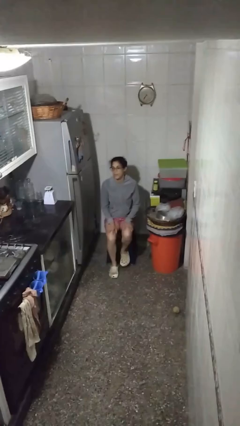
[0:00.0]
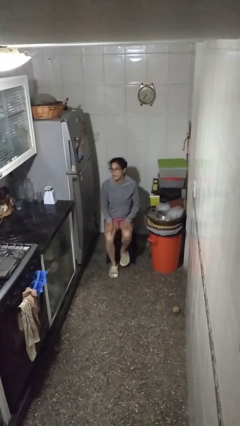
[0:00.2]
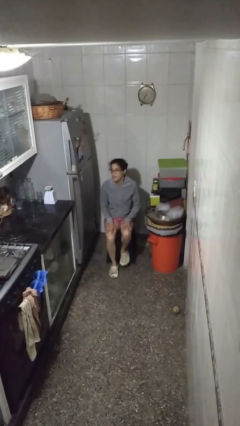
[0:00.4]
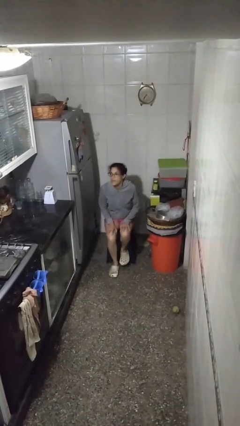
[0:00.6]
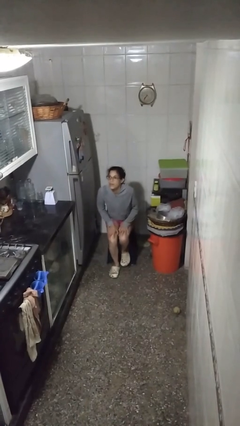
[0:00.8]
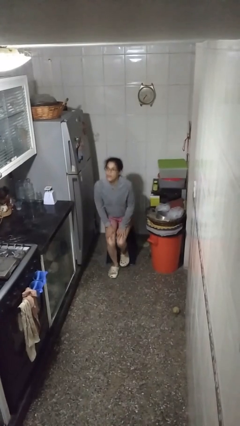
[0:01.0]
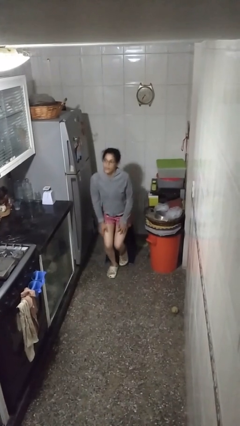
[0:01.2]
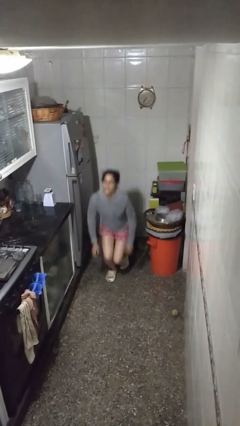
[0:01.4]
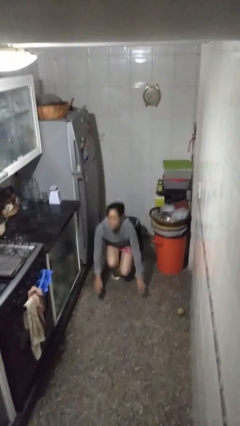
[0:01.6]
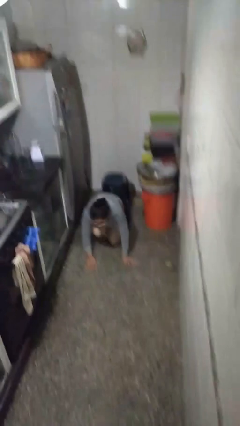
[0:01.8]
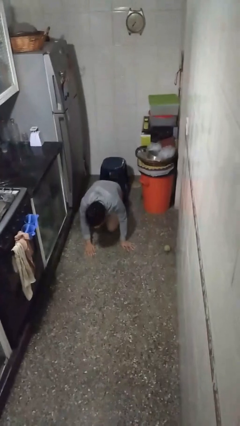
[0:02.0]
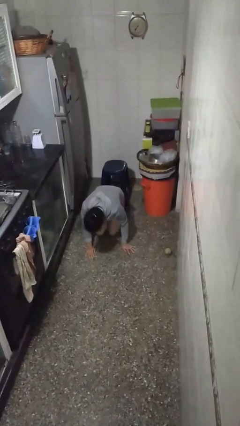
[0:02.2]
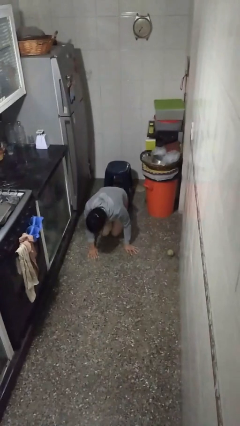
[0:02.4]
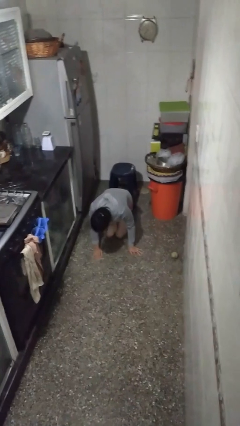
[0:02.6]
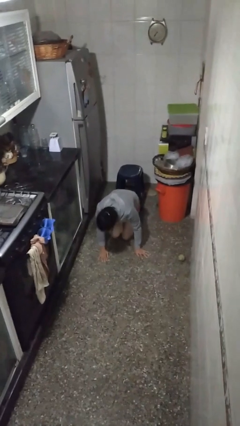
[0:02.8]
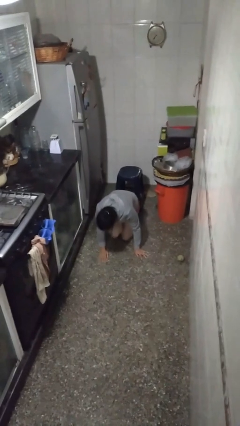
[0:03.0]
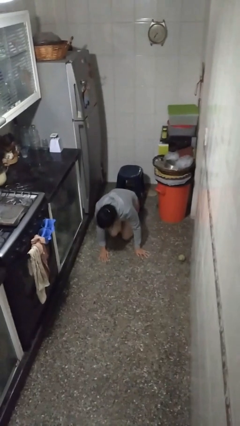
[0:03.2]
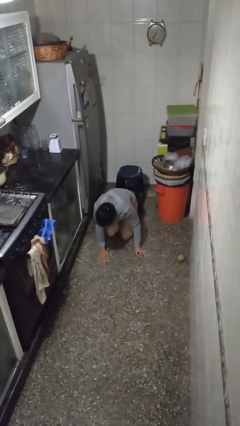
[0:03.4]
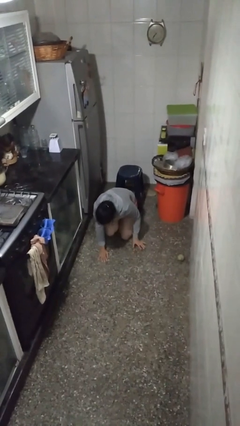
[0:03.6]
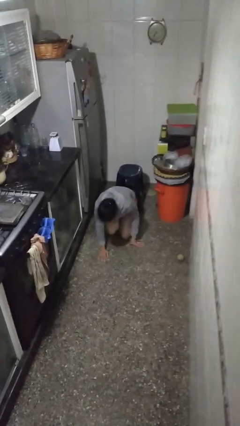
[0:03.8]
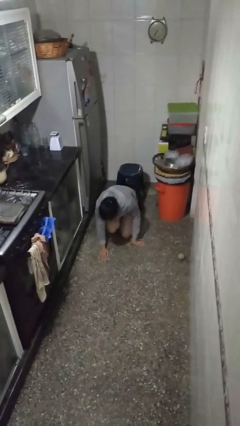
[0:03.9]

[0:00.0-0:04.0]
person falls from chair

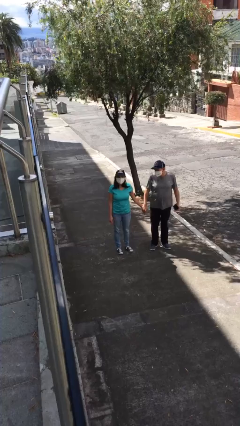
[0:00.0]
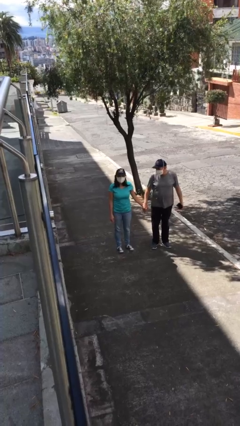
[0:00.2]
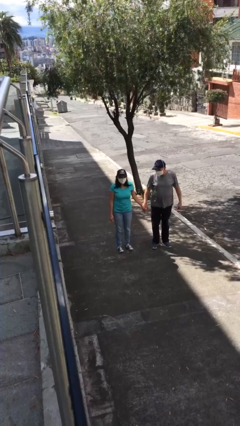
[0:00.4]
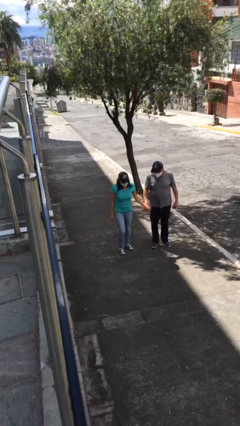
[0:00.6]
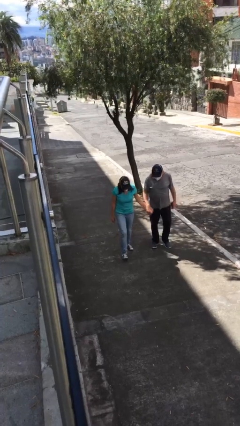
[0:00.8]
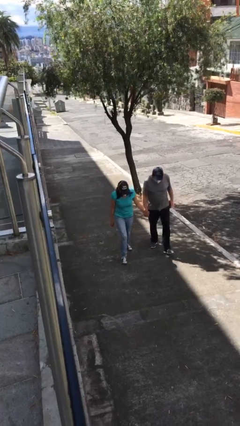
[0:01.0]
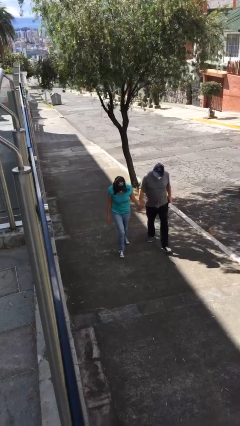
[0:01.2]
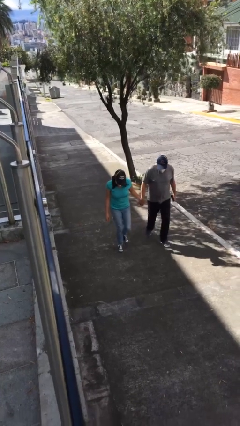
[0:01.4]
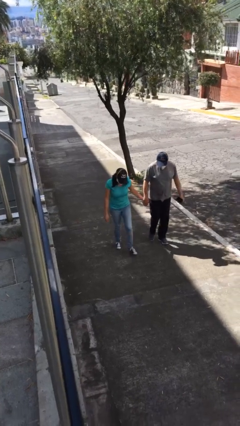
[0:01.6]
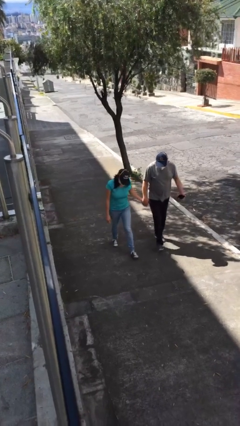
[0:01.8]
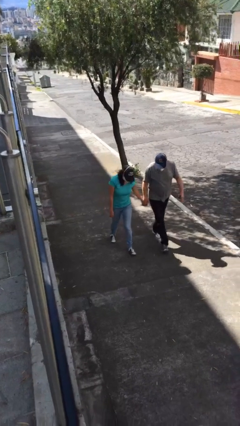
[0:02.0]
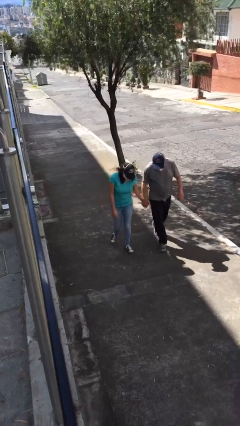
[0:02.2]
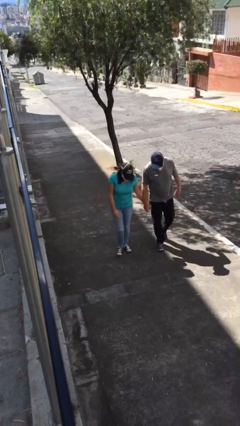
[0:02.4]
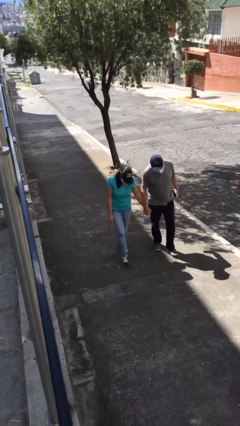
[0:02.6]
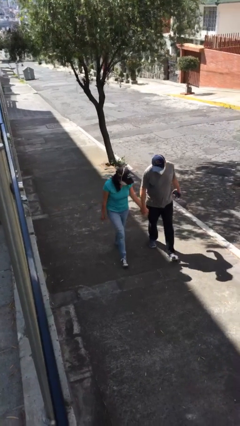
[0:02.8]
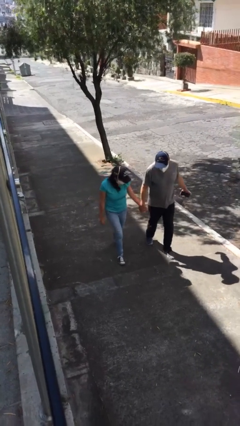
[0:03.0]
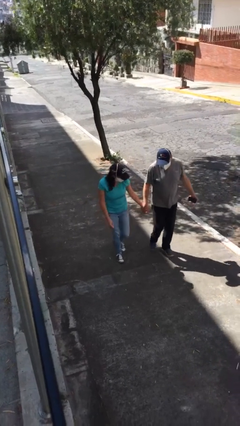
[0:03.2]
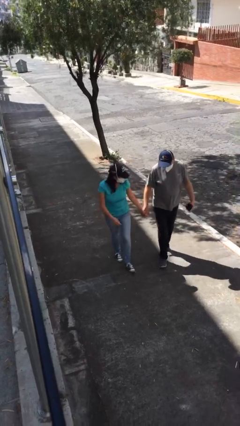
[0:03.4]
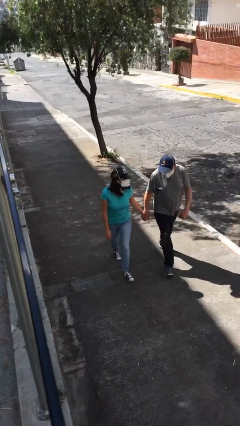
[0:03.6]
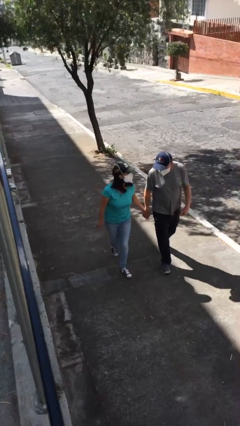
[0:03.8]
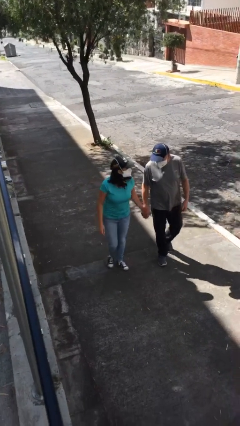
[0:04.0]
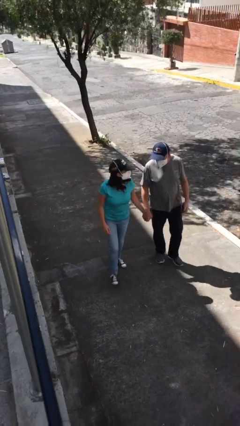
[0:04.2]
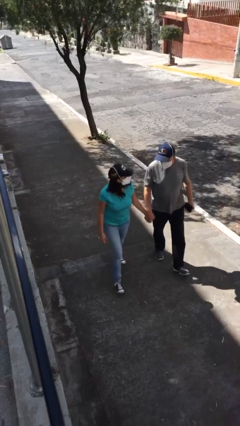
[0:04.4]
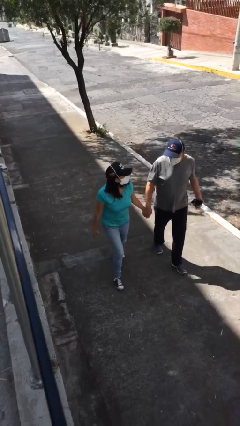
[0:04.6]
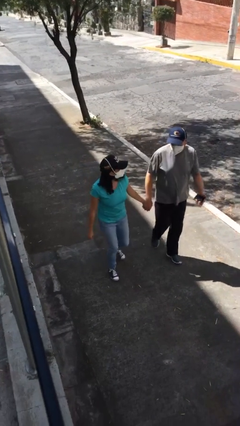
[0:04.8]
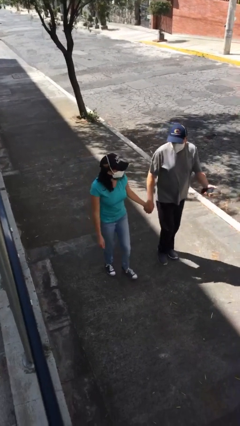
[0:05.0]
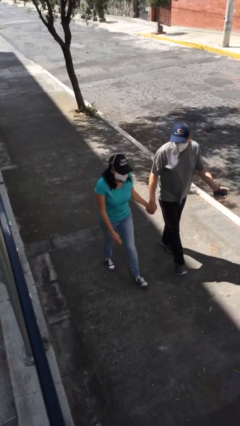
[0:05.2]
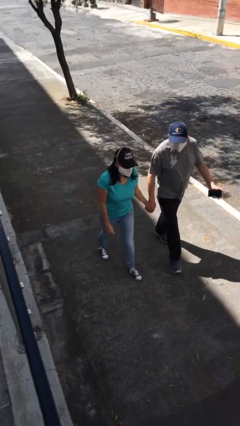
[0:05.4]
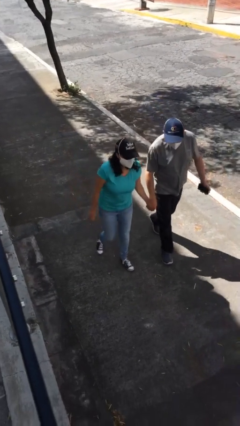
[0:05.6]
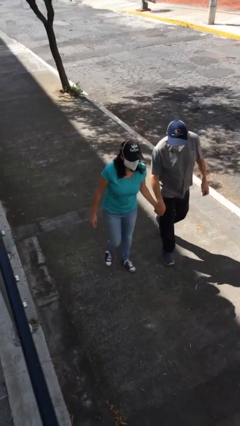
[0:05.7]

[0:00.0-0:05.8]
person holds hand

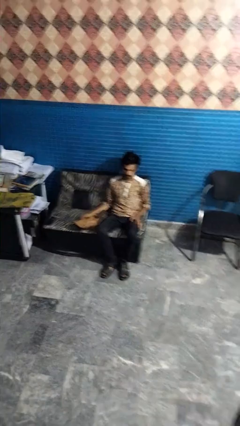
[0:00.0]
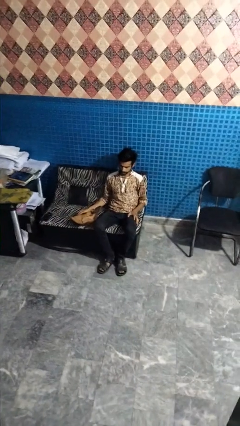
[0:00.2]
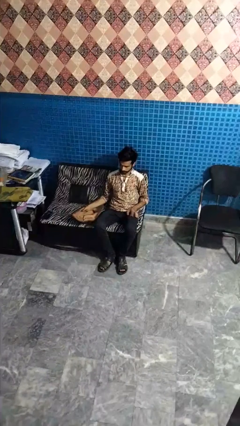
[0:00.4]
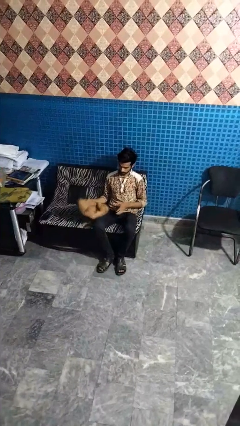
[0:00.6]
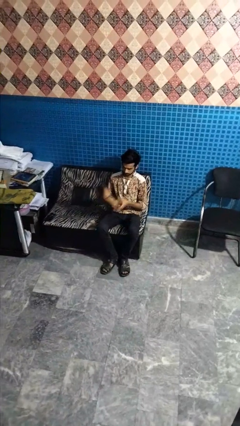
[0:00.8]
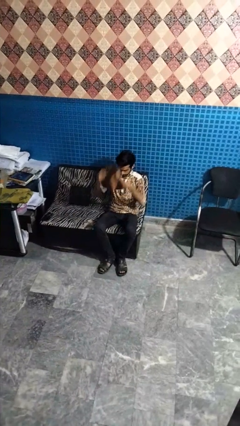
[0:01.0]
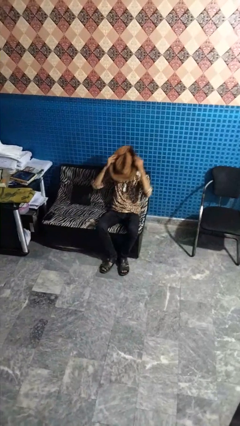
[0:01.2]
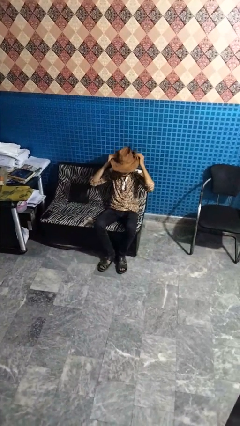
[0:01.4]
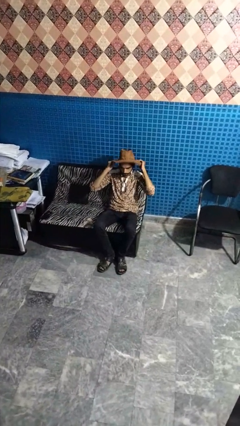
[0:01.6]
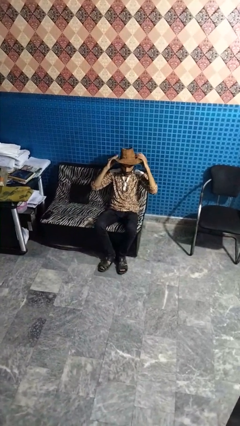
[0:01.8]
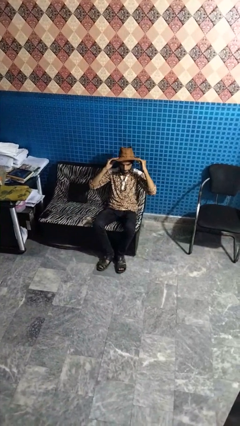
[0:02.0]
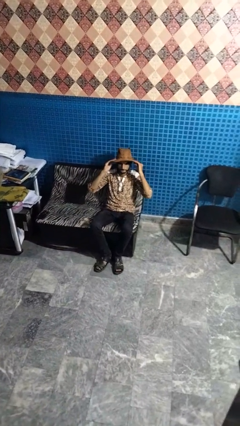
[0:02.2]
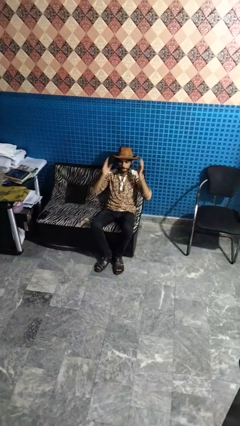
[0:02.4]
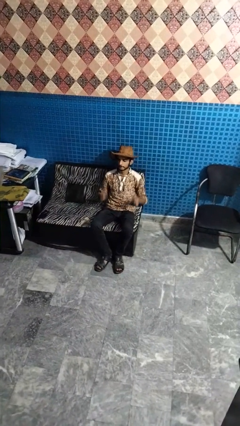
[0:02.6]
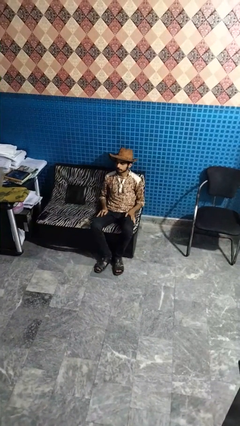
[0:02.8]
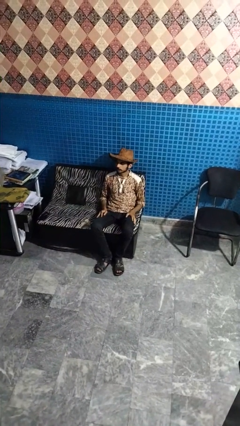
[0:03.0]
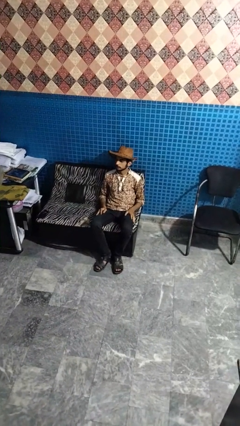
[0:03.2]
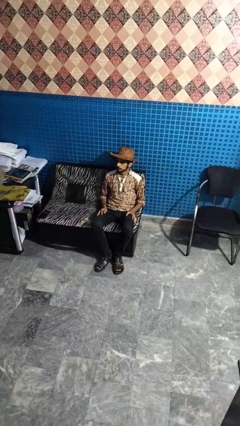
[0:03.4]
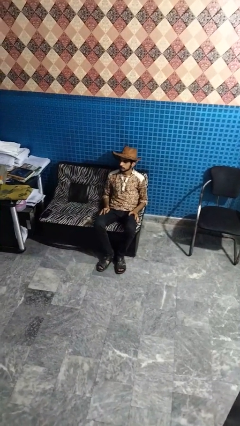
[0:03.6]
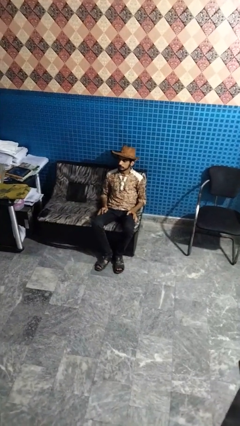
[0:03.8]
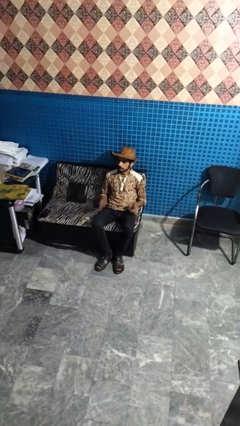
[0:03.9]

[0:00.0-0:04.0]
person puts on hat

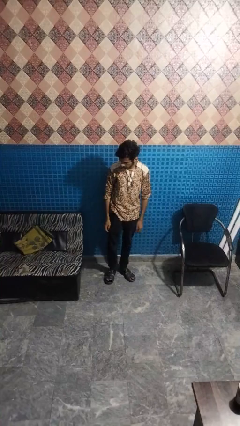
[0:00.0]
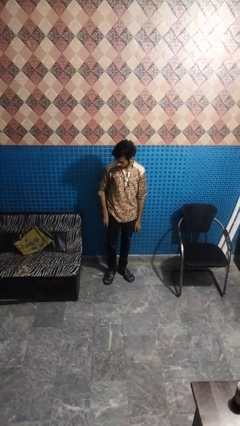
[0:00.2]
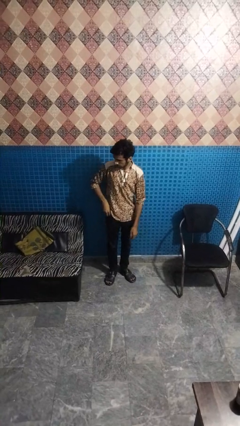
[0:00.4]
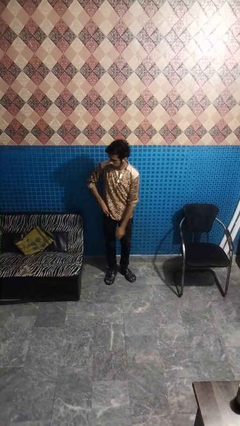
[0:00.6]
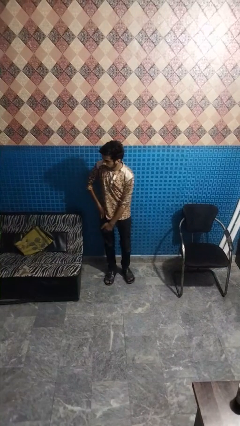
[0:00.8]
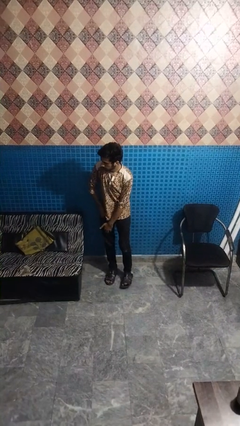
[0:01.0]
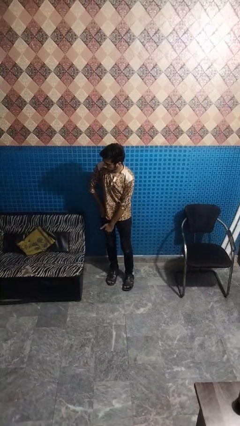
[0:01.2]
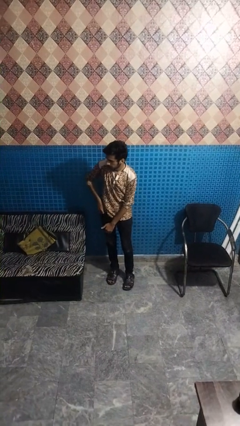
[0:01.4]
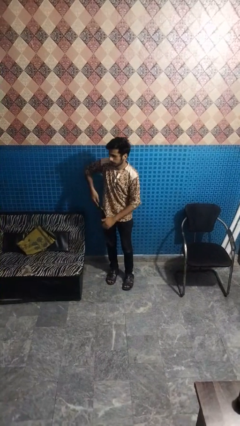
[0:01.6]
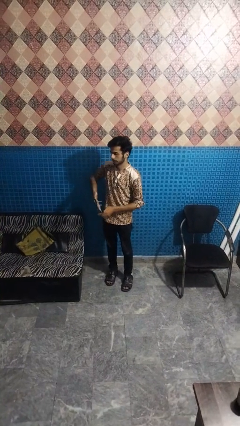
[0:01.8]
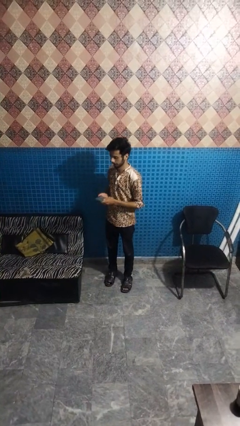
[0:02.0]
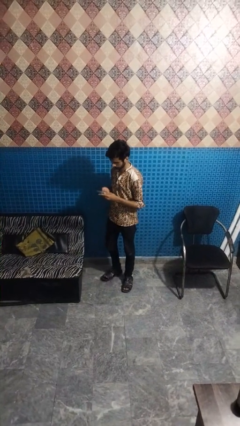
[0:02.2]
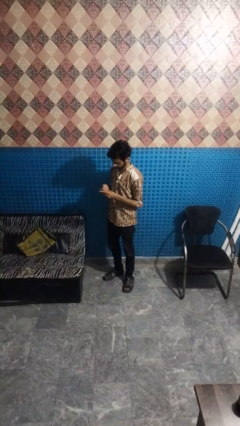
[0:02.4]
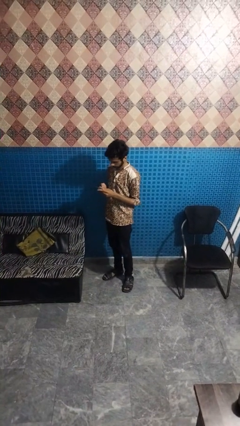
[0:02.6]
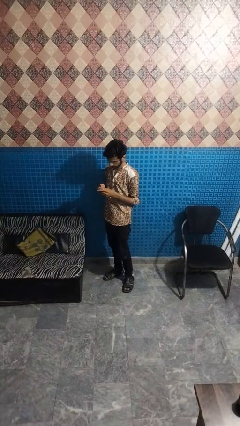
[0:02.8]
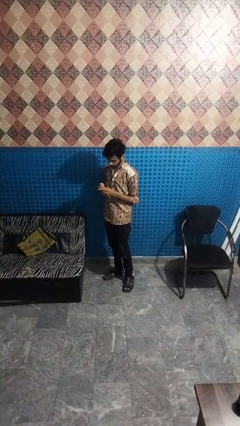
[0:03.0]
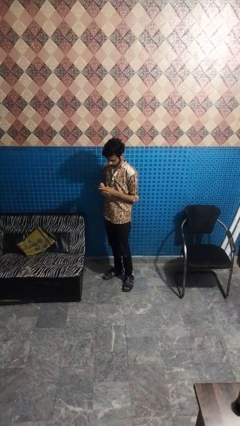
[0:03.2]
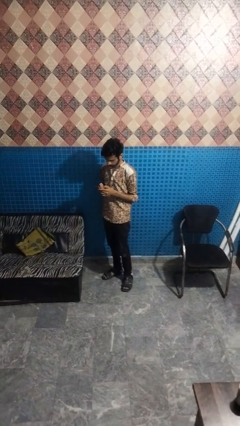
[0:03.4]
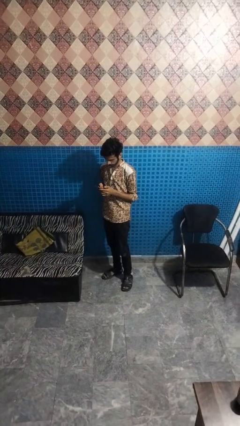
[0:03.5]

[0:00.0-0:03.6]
person takes phone from pocket

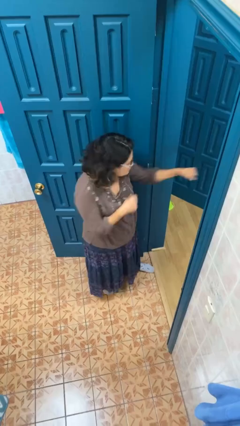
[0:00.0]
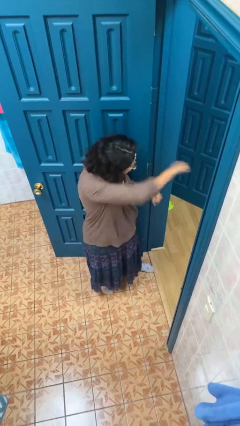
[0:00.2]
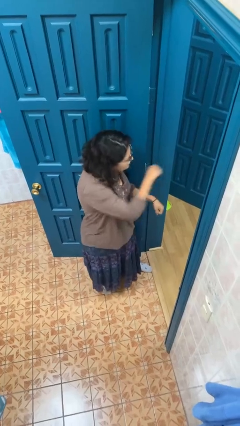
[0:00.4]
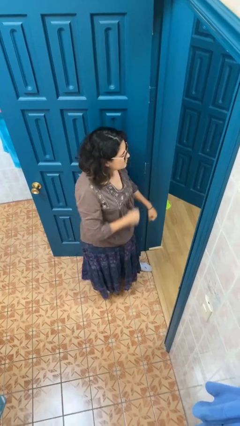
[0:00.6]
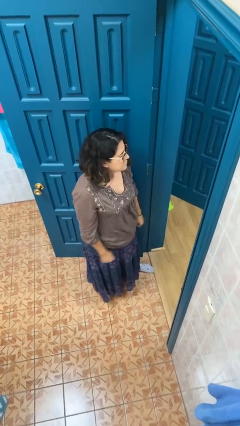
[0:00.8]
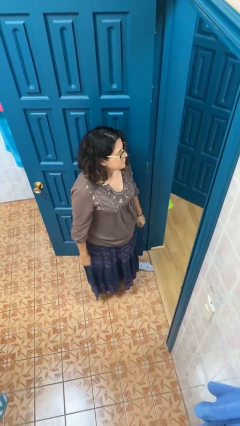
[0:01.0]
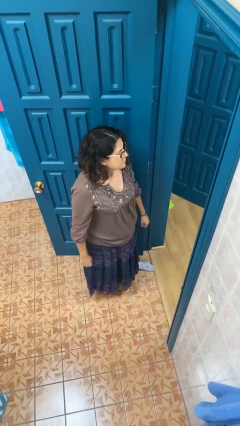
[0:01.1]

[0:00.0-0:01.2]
person punches
